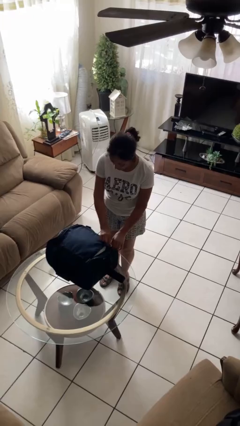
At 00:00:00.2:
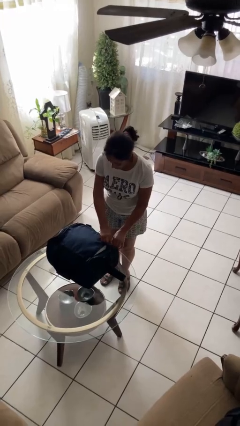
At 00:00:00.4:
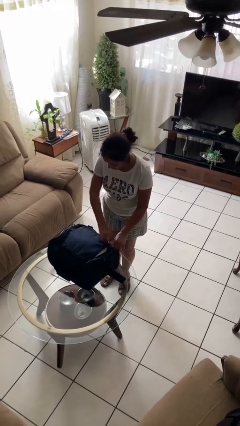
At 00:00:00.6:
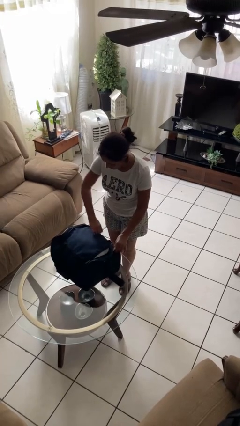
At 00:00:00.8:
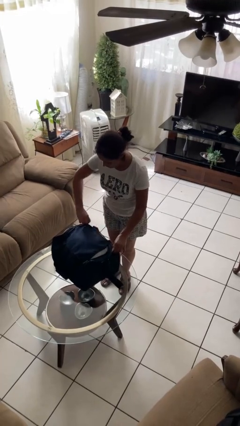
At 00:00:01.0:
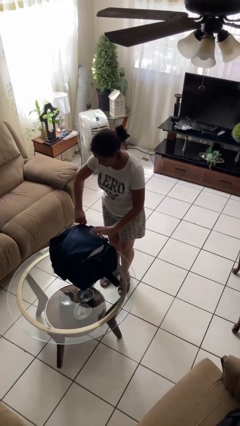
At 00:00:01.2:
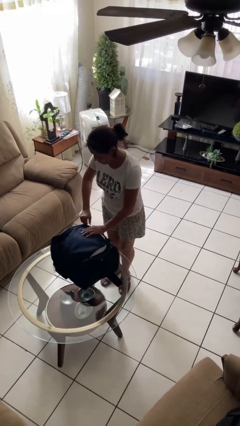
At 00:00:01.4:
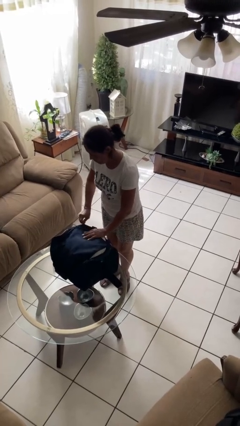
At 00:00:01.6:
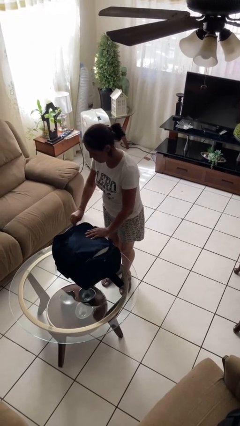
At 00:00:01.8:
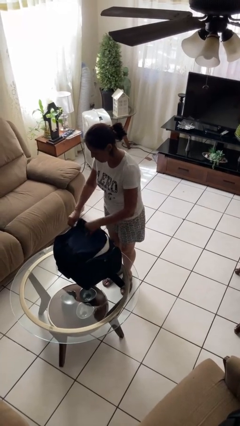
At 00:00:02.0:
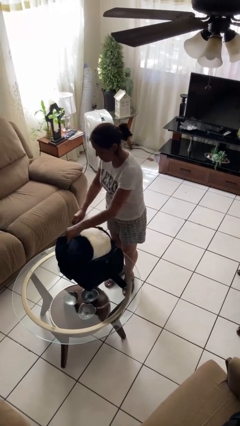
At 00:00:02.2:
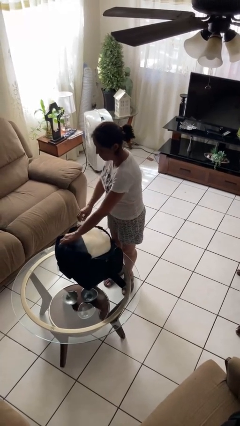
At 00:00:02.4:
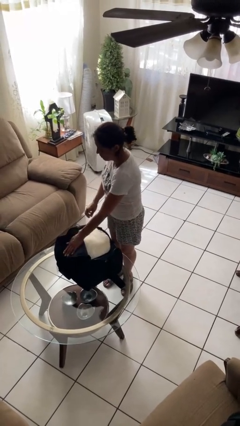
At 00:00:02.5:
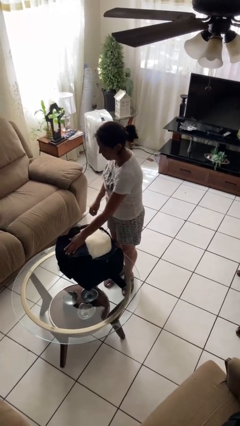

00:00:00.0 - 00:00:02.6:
person opens suitcase

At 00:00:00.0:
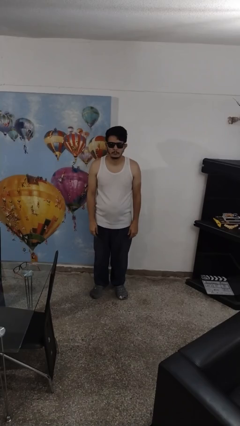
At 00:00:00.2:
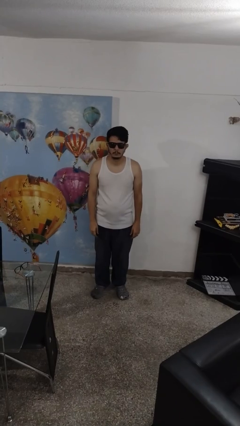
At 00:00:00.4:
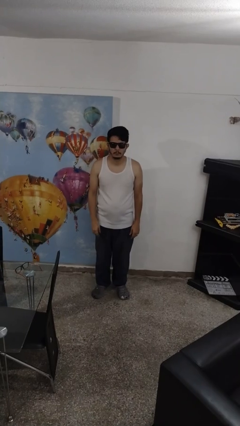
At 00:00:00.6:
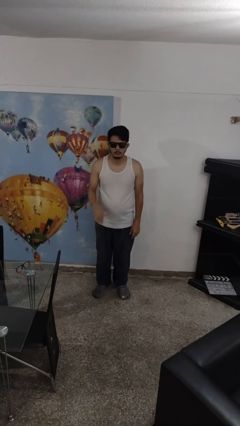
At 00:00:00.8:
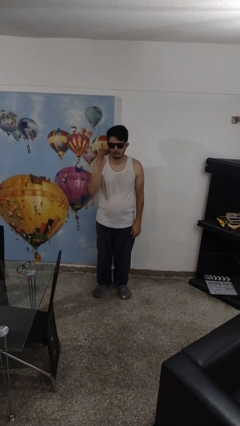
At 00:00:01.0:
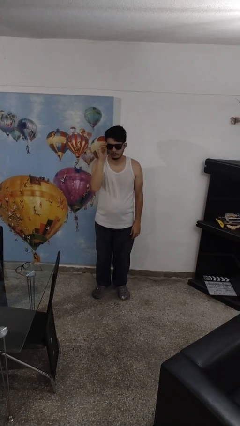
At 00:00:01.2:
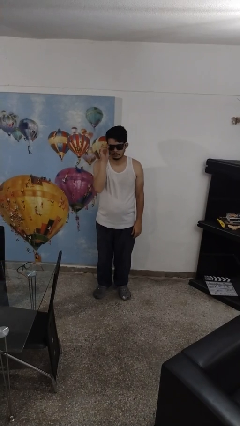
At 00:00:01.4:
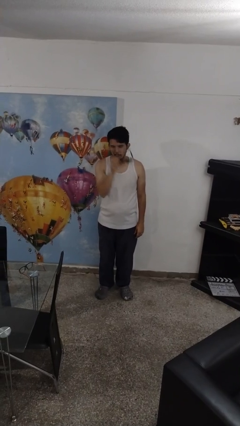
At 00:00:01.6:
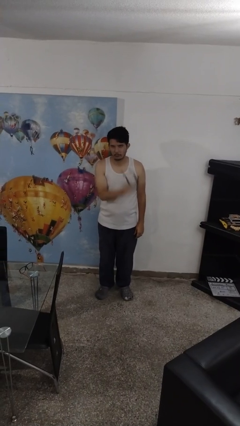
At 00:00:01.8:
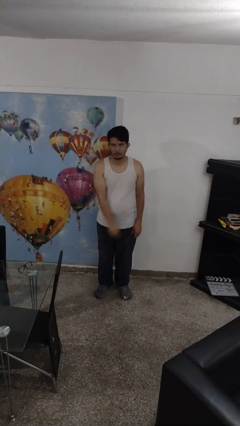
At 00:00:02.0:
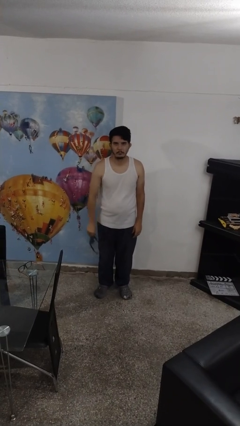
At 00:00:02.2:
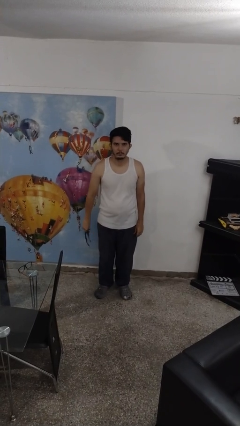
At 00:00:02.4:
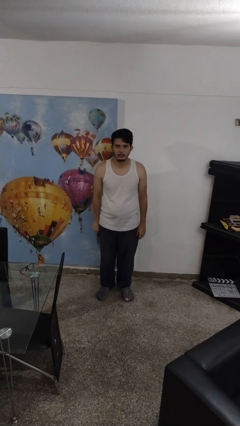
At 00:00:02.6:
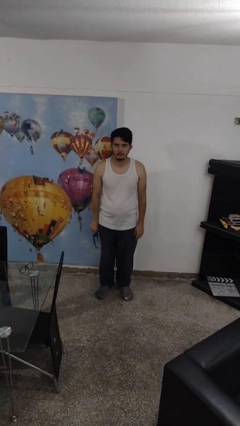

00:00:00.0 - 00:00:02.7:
person takes off sunglasses

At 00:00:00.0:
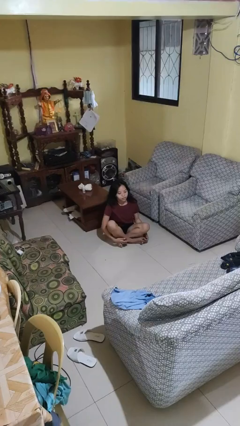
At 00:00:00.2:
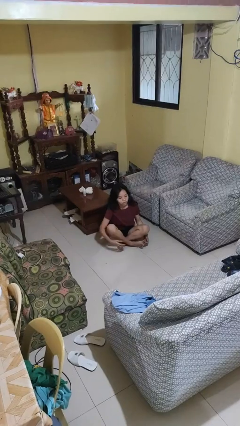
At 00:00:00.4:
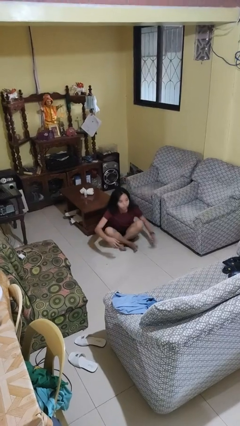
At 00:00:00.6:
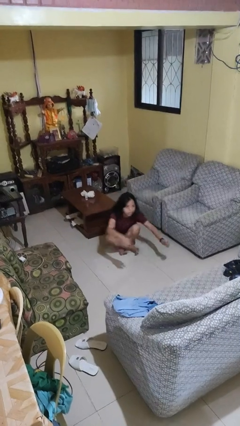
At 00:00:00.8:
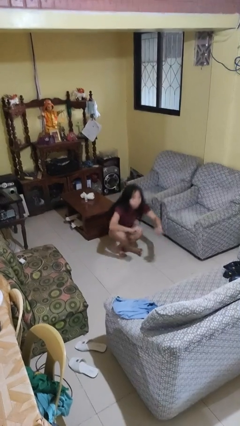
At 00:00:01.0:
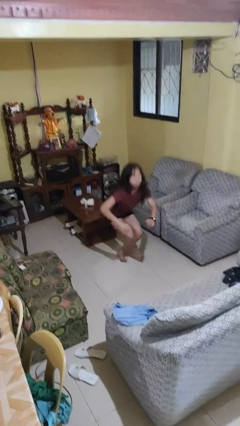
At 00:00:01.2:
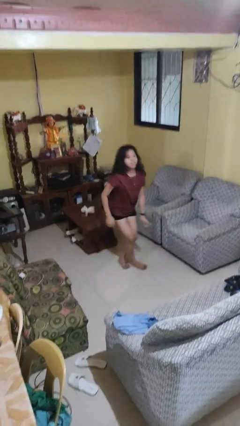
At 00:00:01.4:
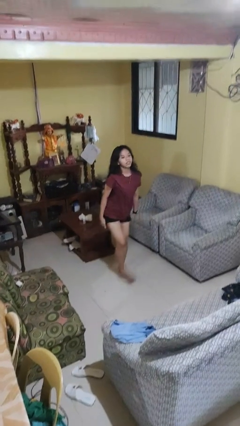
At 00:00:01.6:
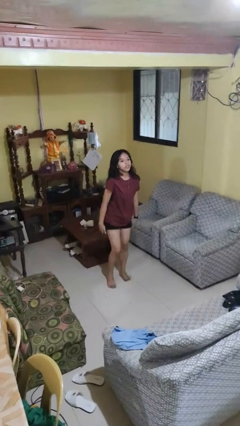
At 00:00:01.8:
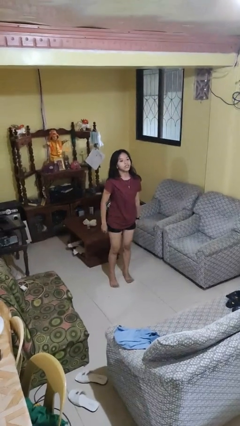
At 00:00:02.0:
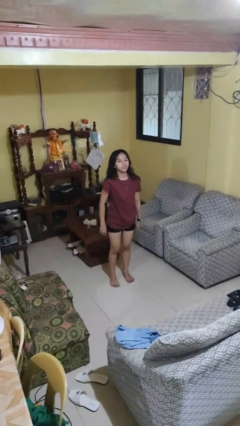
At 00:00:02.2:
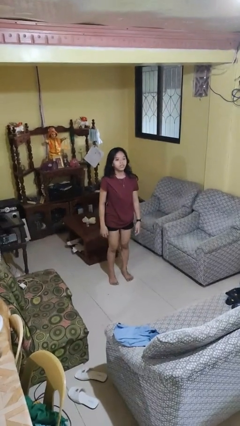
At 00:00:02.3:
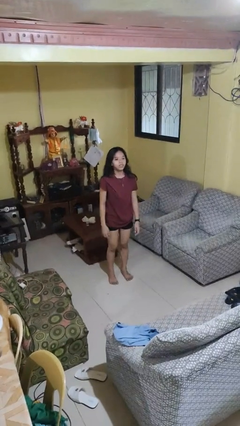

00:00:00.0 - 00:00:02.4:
person stands up from floor

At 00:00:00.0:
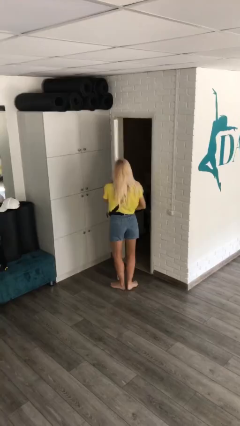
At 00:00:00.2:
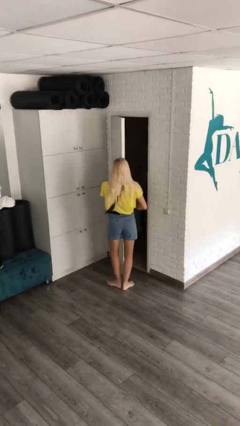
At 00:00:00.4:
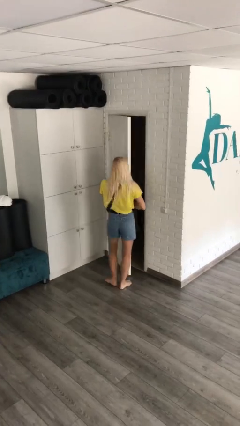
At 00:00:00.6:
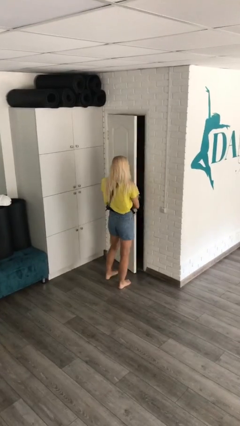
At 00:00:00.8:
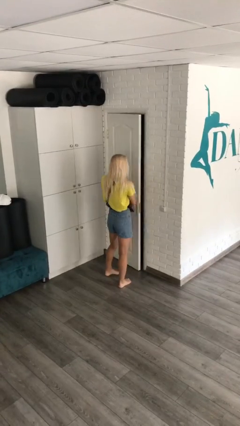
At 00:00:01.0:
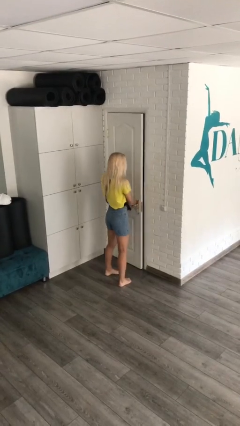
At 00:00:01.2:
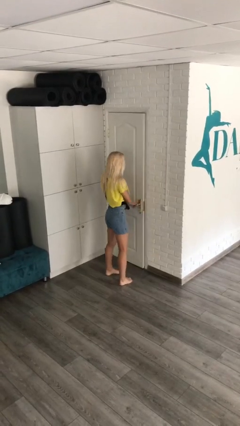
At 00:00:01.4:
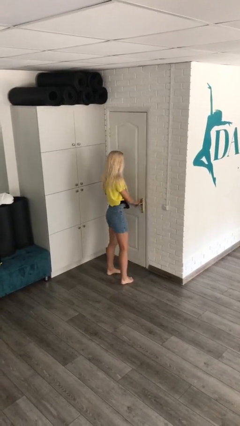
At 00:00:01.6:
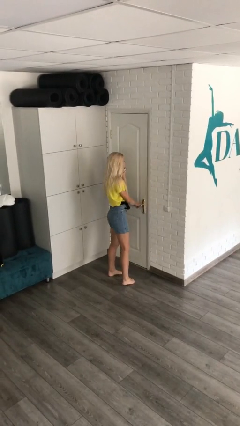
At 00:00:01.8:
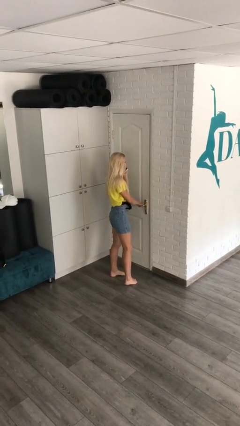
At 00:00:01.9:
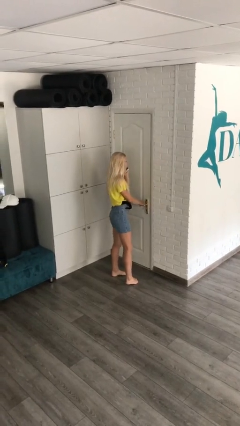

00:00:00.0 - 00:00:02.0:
person closes facility door

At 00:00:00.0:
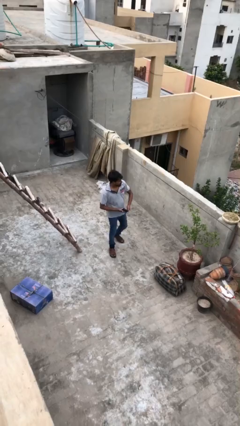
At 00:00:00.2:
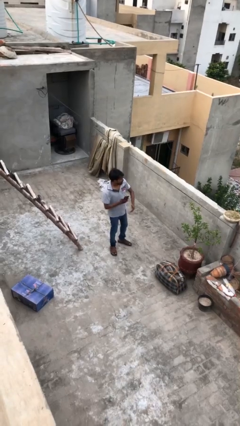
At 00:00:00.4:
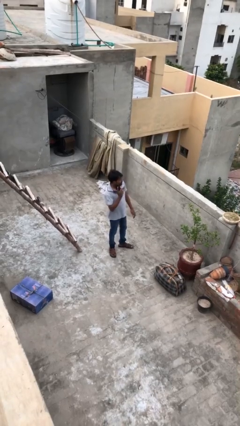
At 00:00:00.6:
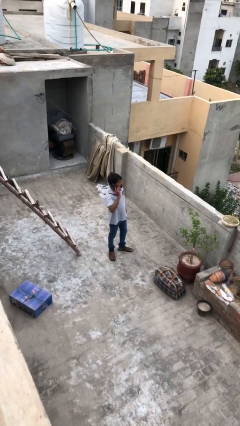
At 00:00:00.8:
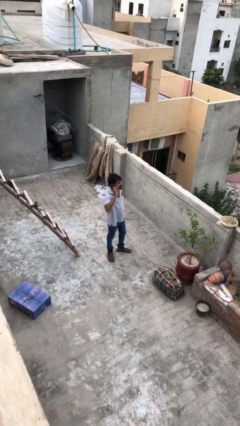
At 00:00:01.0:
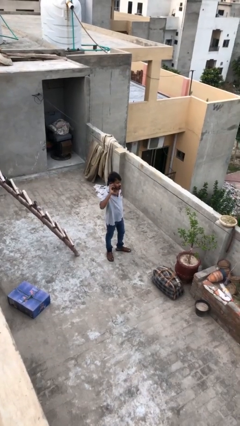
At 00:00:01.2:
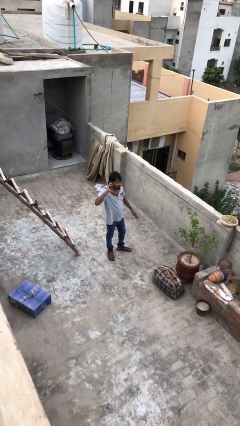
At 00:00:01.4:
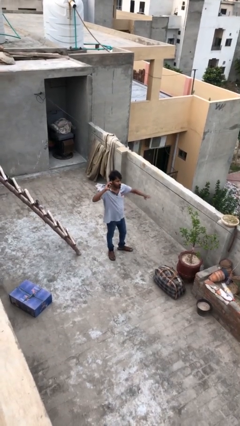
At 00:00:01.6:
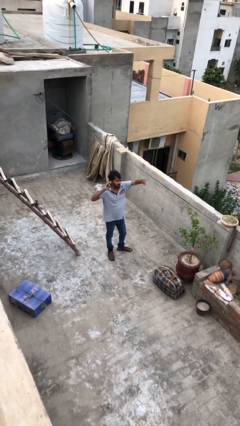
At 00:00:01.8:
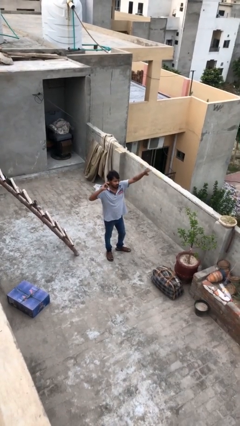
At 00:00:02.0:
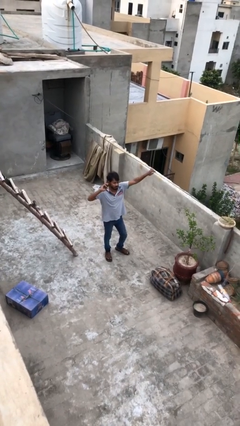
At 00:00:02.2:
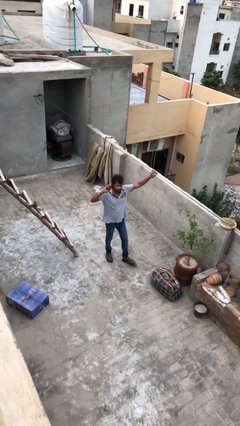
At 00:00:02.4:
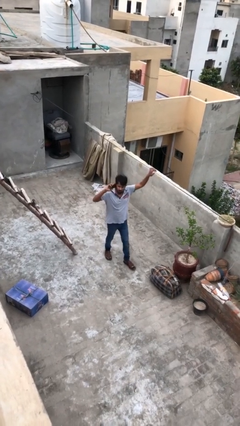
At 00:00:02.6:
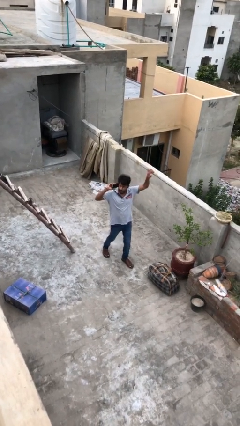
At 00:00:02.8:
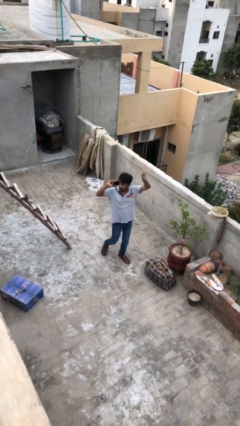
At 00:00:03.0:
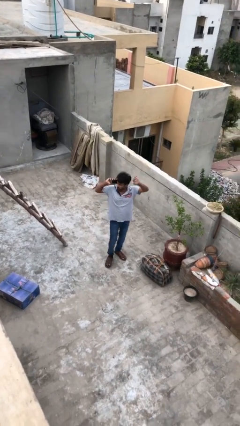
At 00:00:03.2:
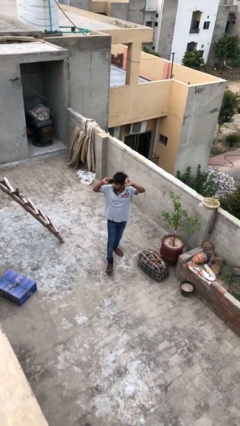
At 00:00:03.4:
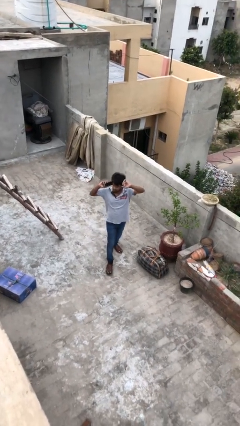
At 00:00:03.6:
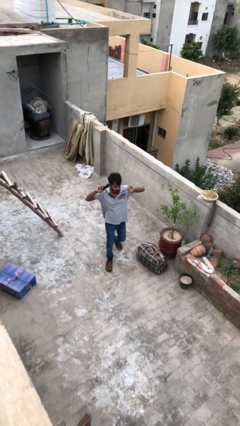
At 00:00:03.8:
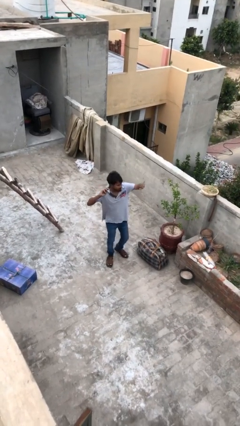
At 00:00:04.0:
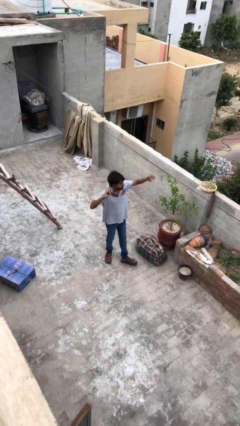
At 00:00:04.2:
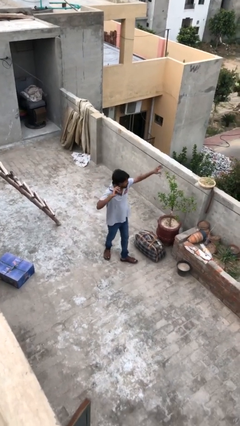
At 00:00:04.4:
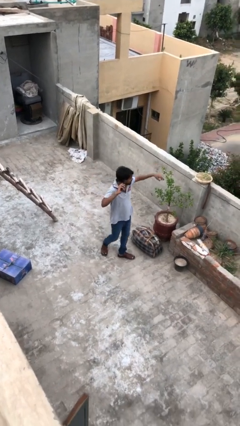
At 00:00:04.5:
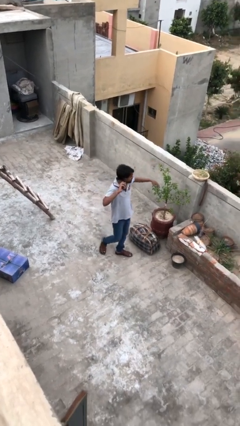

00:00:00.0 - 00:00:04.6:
person talks on phone

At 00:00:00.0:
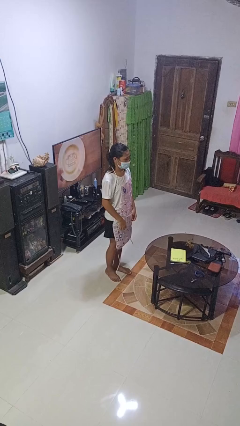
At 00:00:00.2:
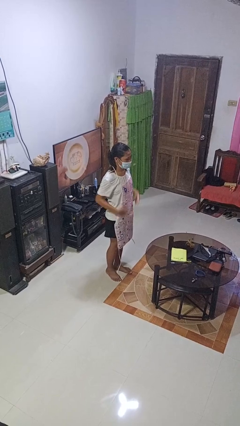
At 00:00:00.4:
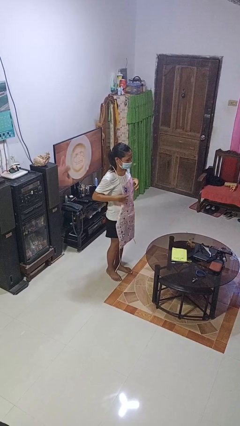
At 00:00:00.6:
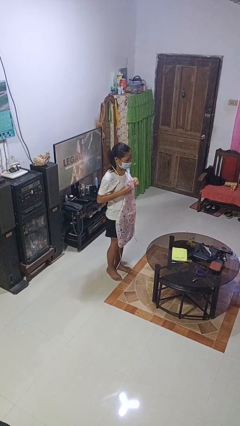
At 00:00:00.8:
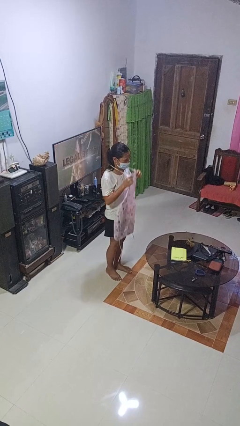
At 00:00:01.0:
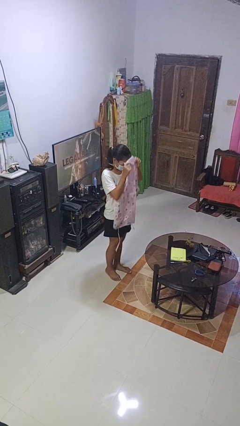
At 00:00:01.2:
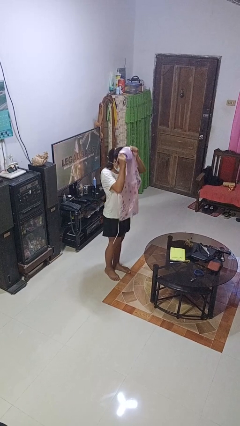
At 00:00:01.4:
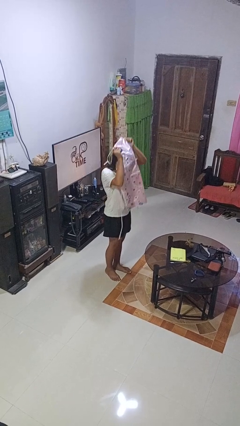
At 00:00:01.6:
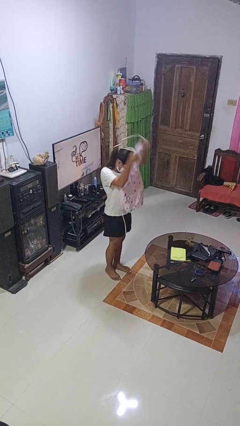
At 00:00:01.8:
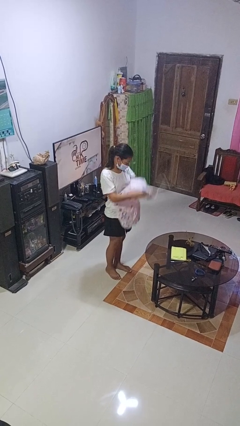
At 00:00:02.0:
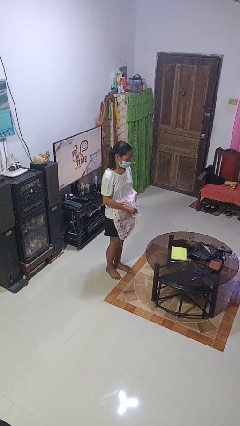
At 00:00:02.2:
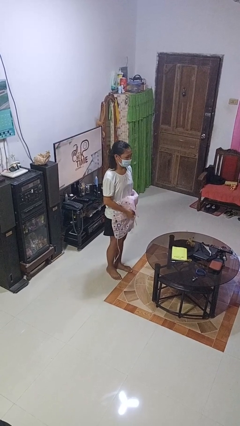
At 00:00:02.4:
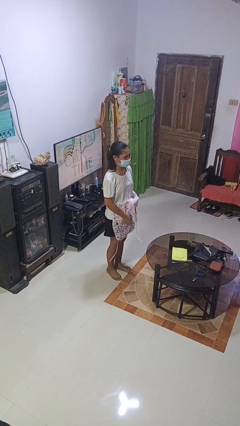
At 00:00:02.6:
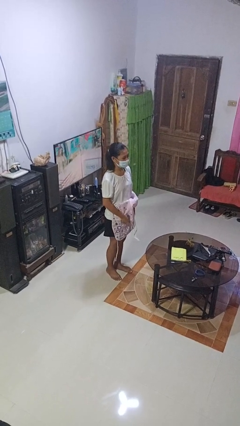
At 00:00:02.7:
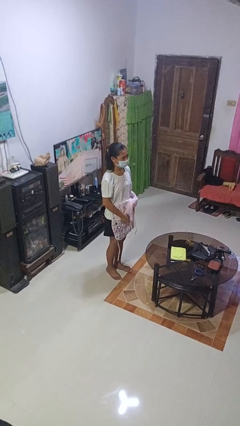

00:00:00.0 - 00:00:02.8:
person takes off apron

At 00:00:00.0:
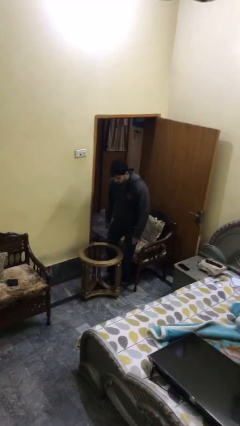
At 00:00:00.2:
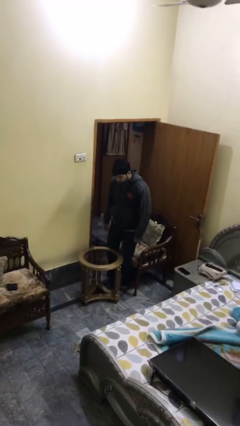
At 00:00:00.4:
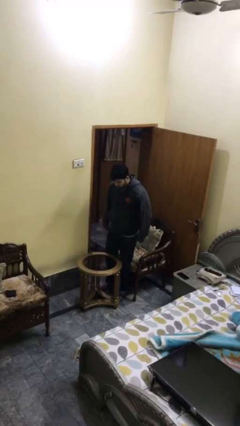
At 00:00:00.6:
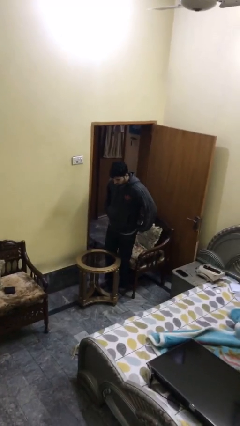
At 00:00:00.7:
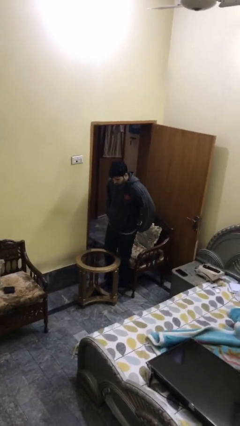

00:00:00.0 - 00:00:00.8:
person stands up
